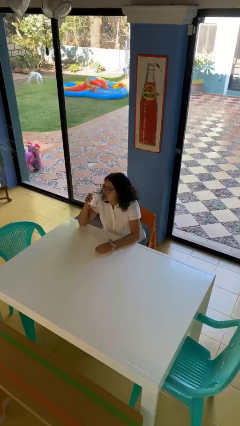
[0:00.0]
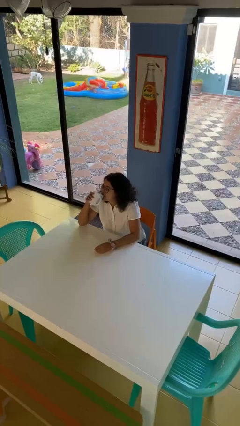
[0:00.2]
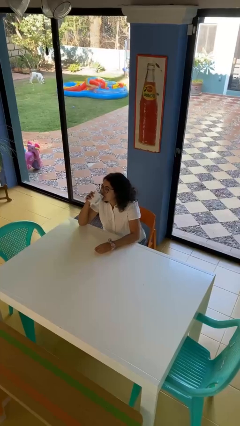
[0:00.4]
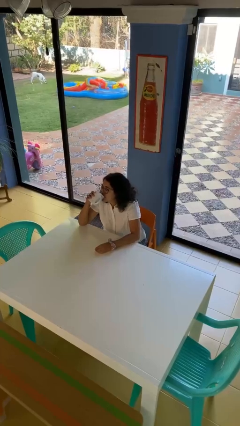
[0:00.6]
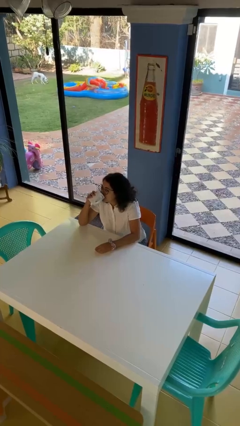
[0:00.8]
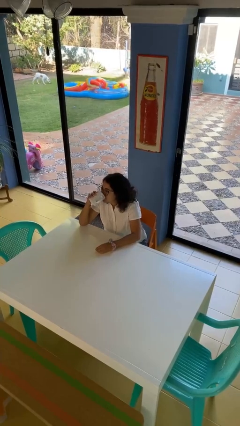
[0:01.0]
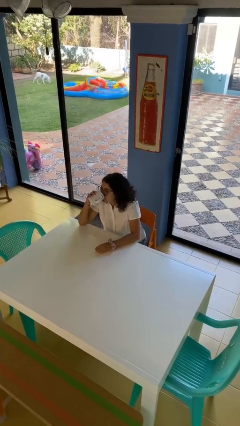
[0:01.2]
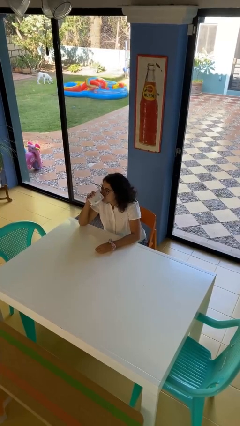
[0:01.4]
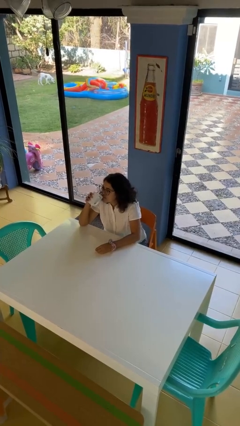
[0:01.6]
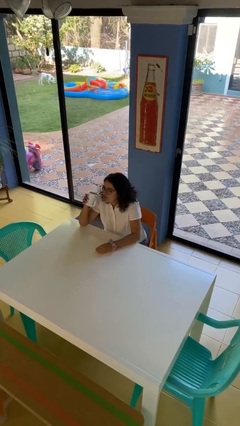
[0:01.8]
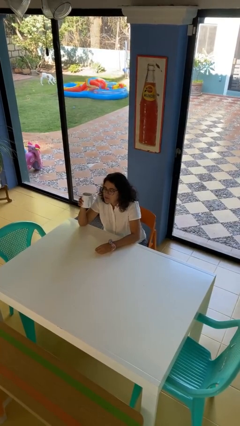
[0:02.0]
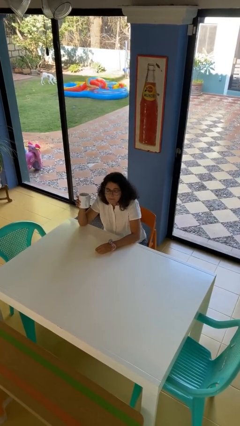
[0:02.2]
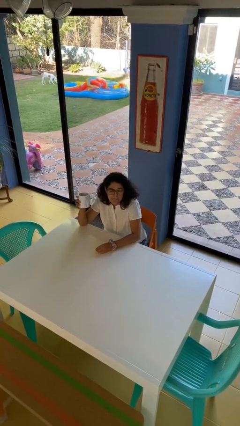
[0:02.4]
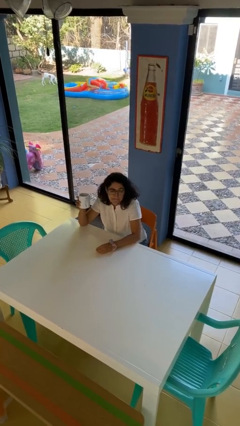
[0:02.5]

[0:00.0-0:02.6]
person drinks from mug

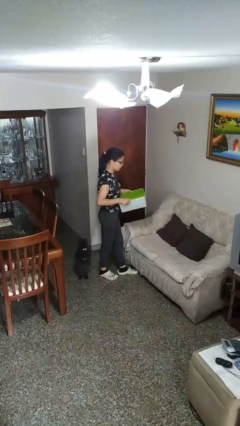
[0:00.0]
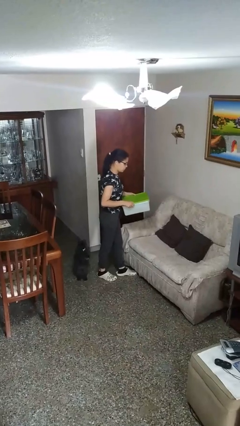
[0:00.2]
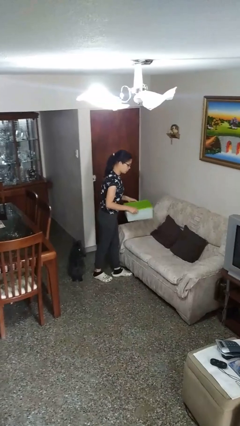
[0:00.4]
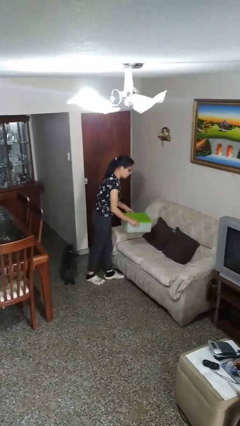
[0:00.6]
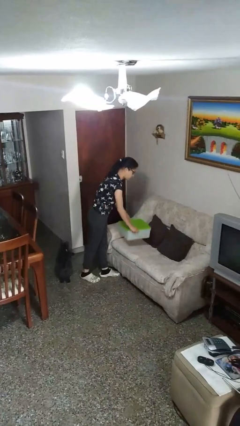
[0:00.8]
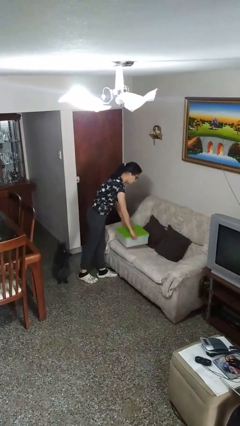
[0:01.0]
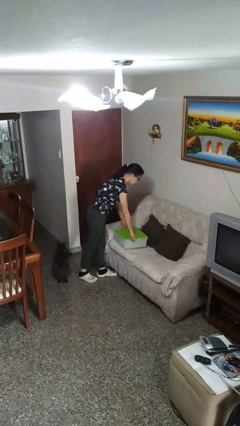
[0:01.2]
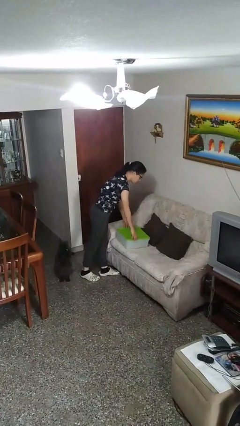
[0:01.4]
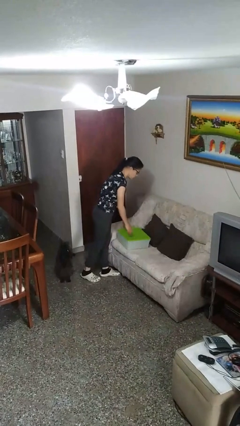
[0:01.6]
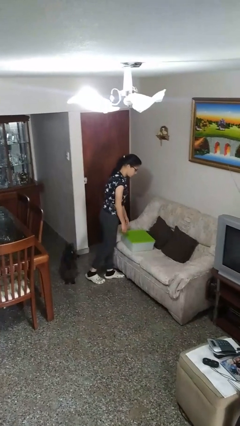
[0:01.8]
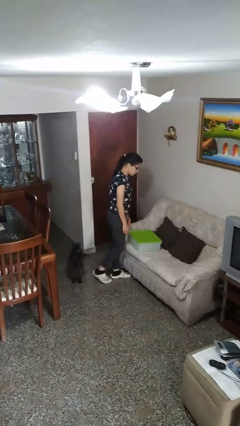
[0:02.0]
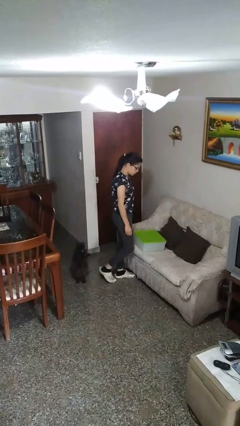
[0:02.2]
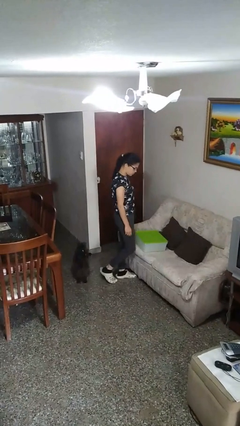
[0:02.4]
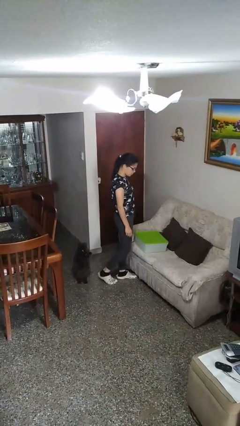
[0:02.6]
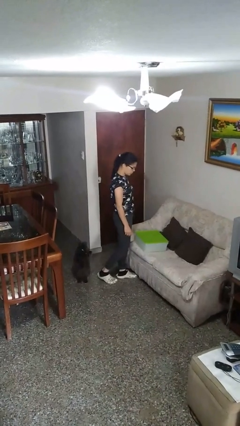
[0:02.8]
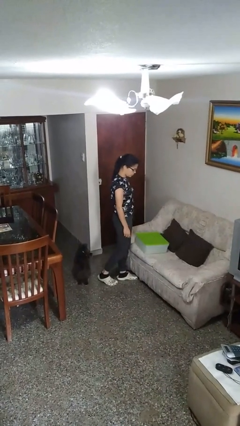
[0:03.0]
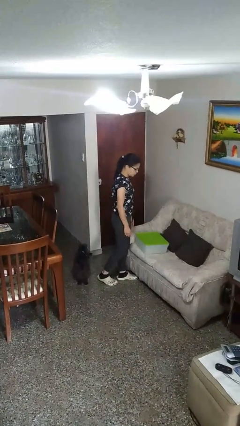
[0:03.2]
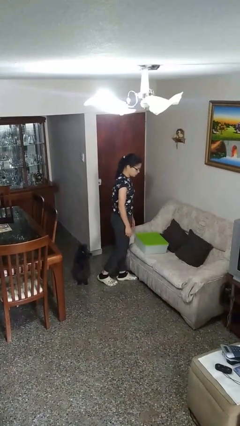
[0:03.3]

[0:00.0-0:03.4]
person puts down object on couch

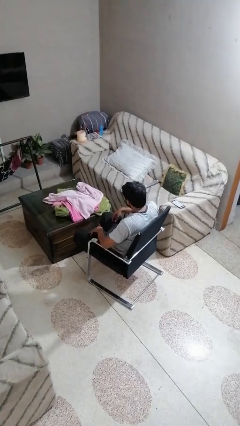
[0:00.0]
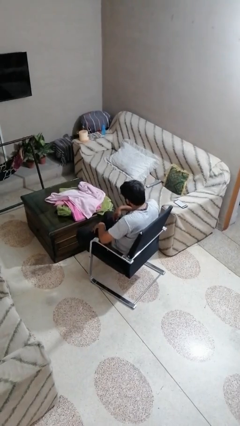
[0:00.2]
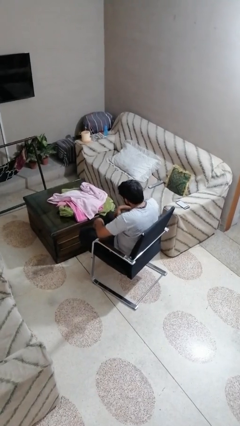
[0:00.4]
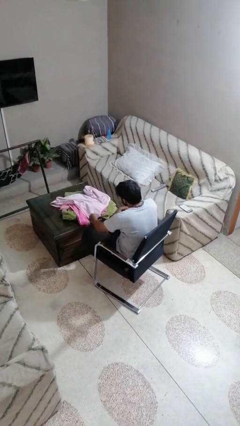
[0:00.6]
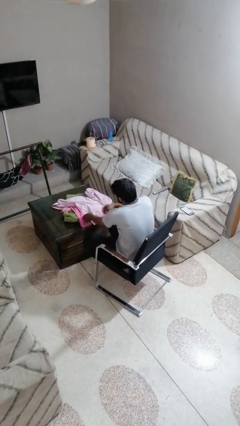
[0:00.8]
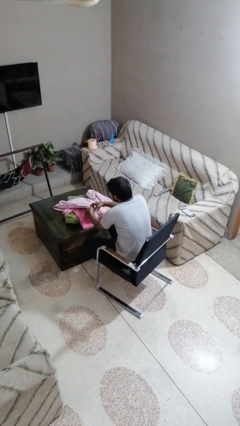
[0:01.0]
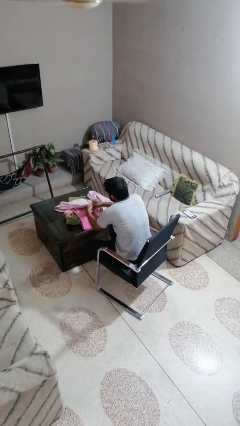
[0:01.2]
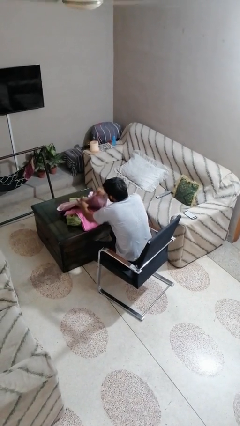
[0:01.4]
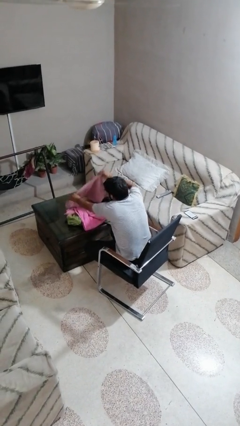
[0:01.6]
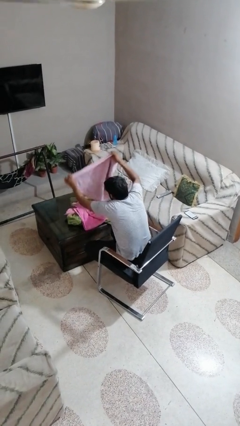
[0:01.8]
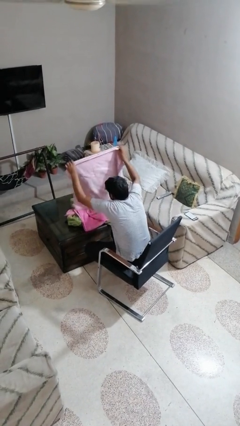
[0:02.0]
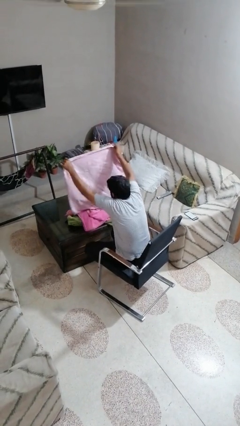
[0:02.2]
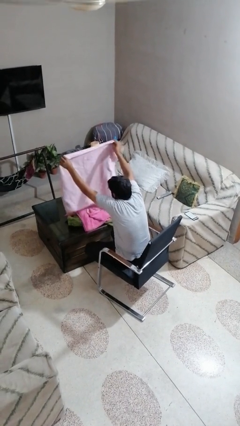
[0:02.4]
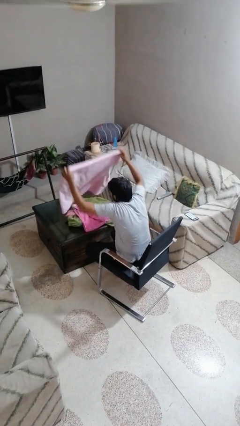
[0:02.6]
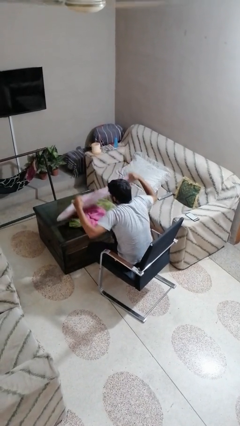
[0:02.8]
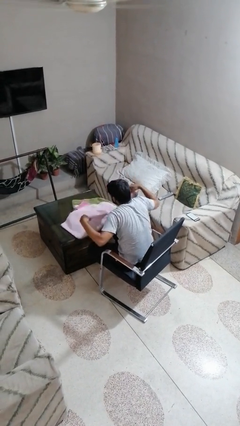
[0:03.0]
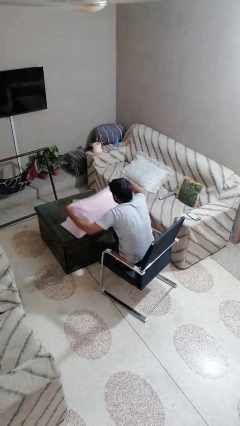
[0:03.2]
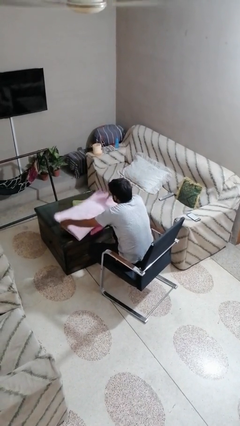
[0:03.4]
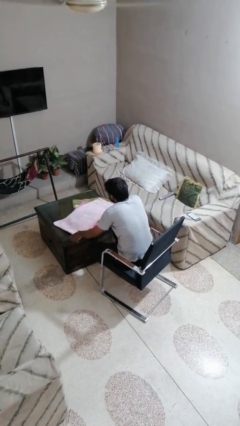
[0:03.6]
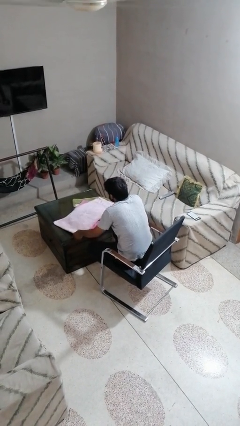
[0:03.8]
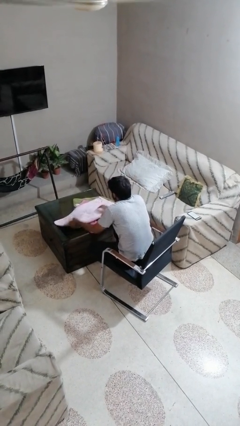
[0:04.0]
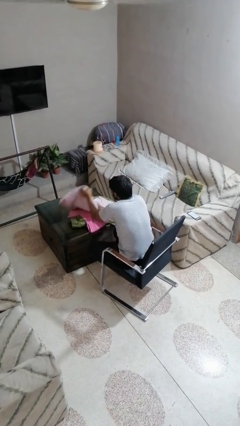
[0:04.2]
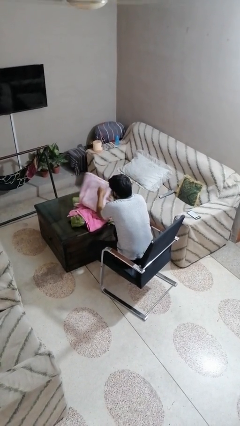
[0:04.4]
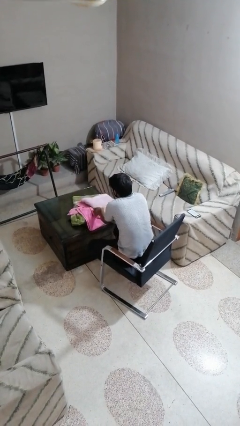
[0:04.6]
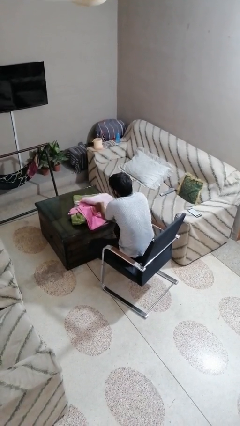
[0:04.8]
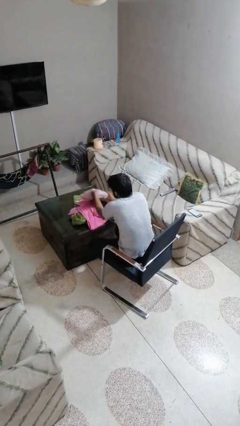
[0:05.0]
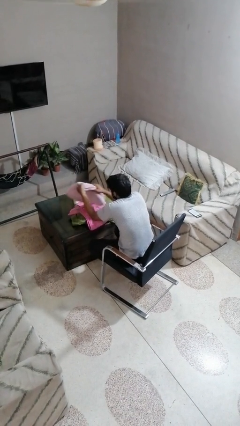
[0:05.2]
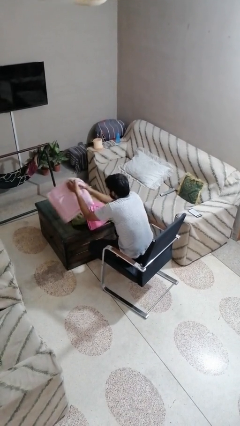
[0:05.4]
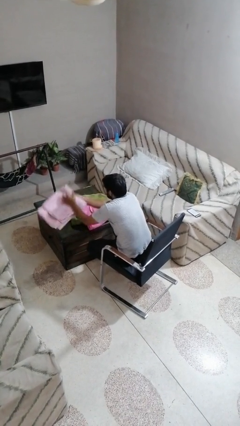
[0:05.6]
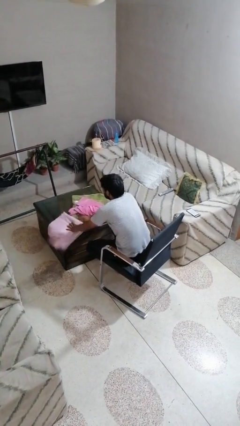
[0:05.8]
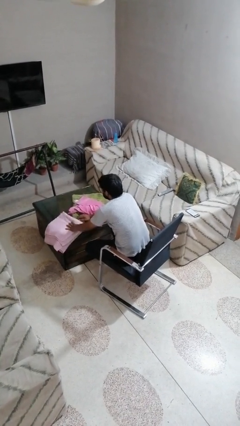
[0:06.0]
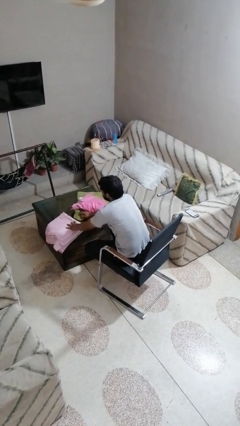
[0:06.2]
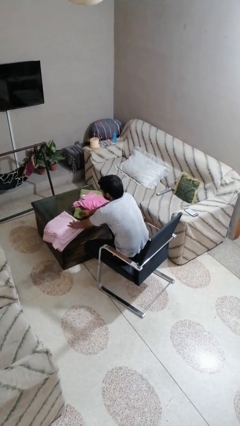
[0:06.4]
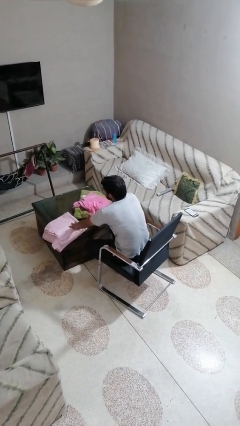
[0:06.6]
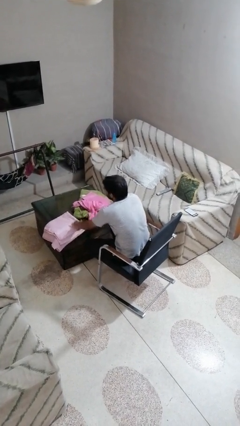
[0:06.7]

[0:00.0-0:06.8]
person folds towel

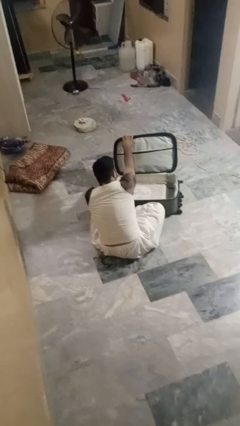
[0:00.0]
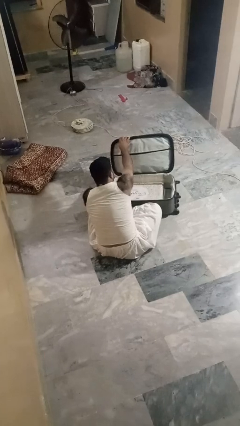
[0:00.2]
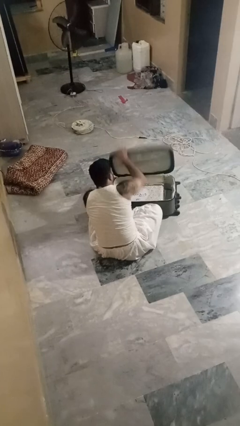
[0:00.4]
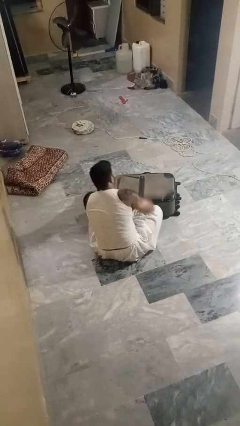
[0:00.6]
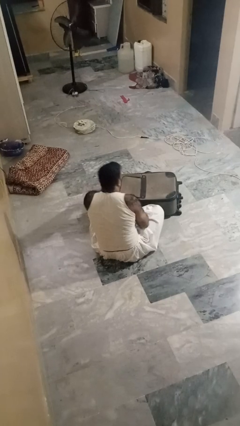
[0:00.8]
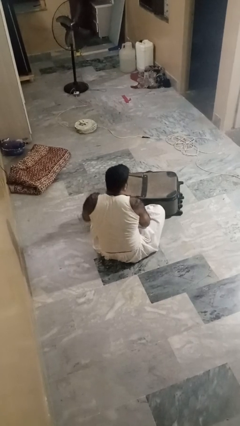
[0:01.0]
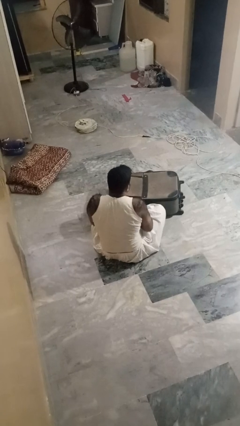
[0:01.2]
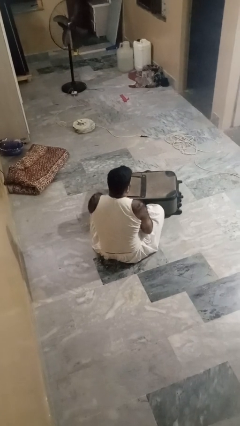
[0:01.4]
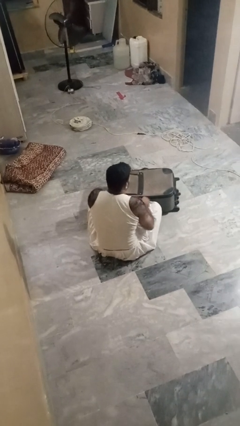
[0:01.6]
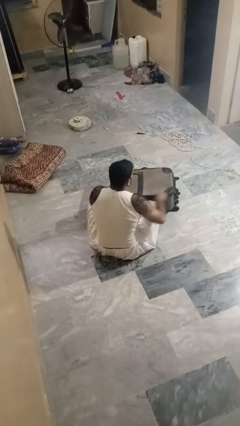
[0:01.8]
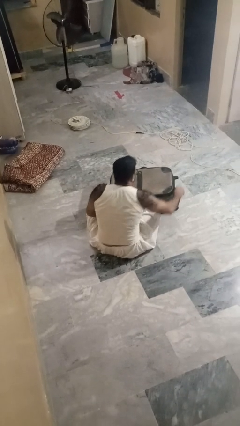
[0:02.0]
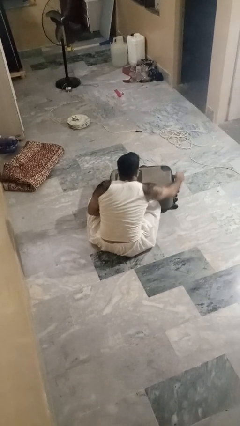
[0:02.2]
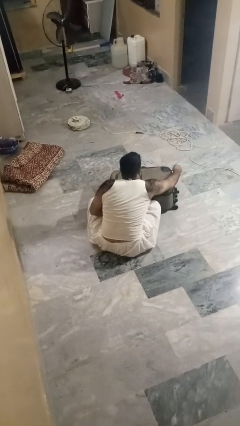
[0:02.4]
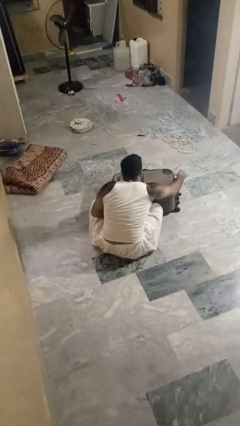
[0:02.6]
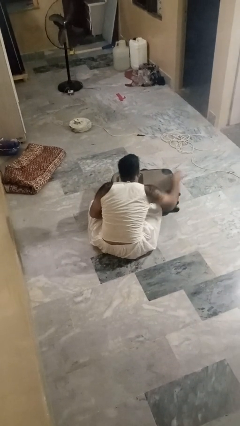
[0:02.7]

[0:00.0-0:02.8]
person closes suitcase

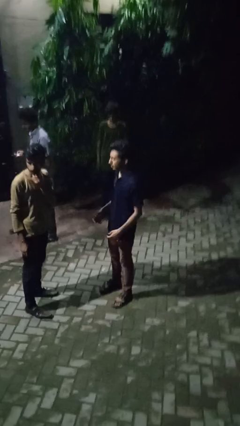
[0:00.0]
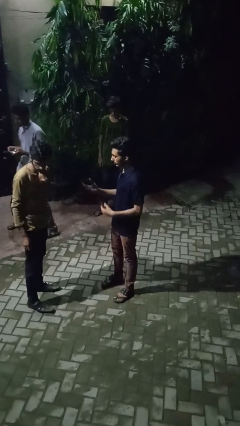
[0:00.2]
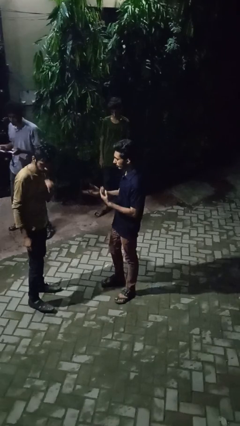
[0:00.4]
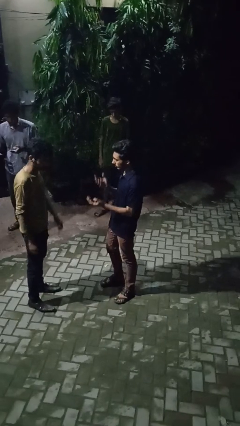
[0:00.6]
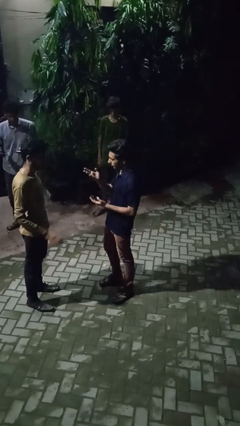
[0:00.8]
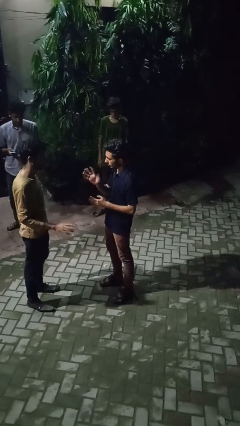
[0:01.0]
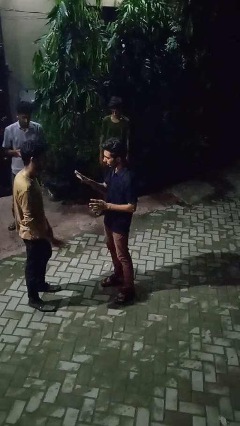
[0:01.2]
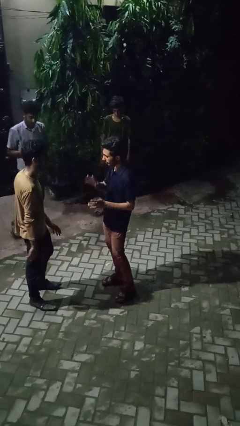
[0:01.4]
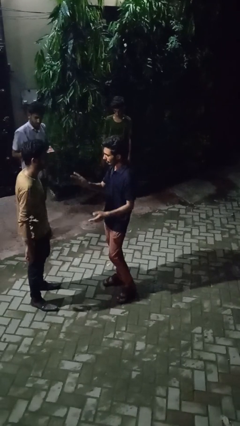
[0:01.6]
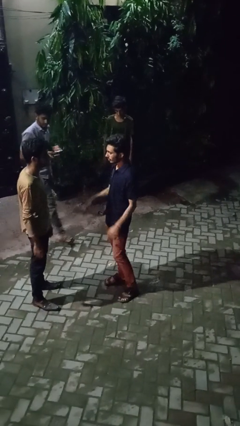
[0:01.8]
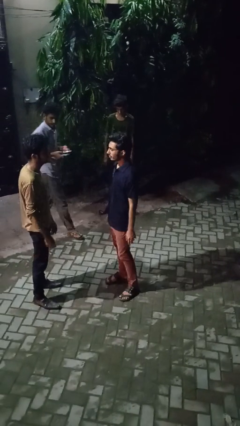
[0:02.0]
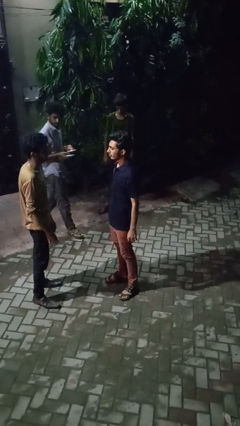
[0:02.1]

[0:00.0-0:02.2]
person talks to person
